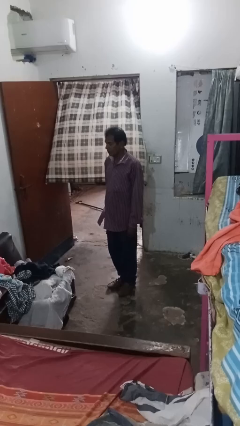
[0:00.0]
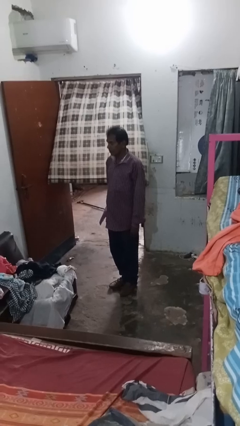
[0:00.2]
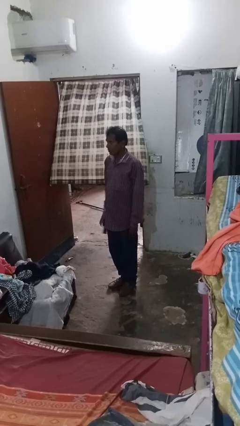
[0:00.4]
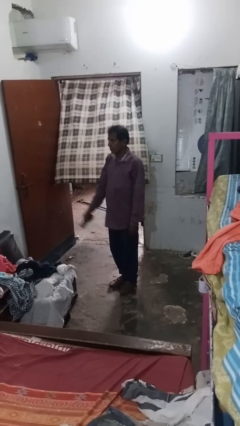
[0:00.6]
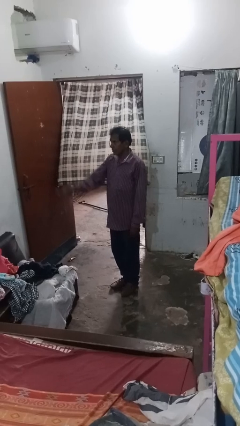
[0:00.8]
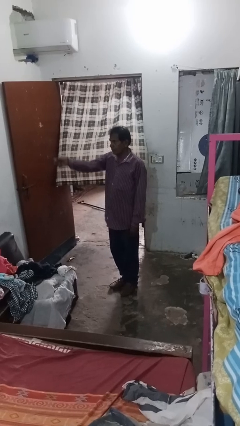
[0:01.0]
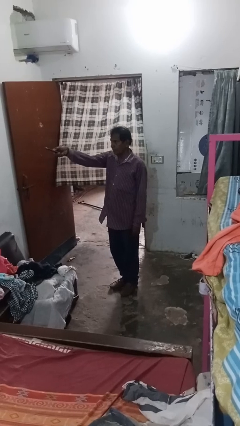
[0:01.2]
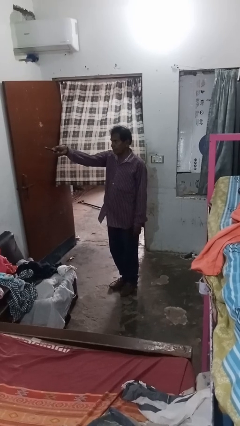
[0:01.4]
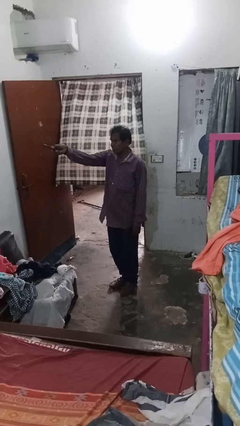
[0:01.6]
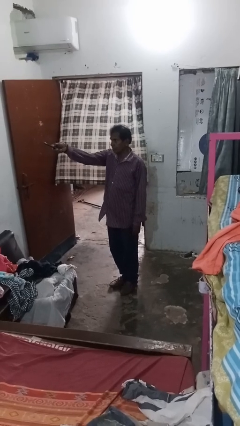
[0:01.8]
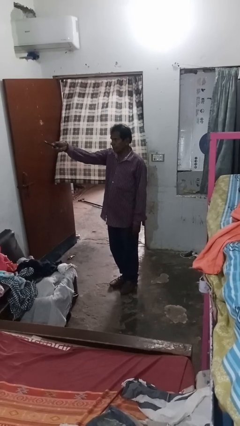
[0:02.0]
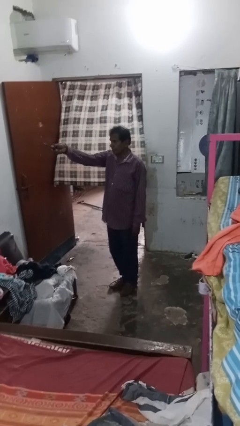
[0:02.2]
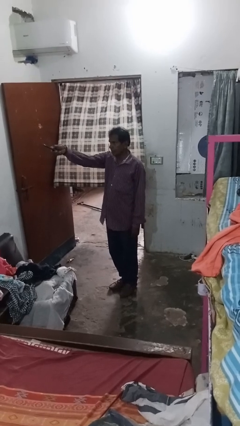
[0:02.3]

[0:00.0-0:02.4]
person uses television remote

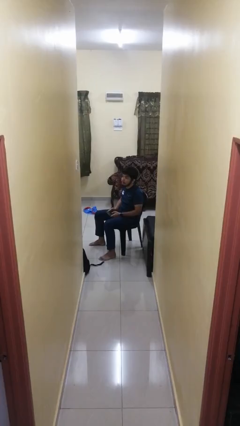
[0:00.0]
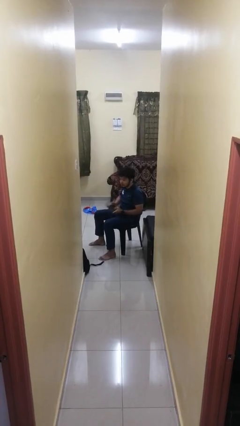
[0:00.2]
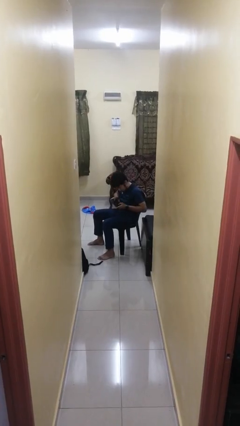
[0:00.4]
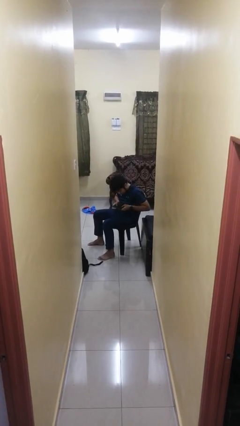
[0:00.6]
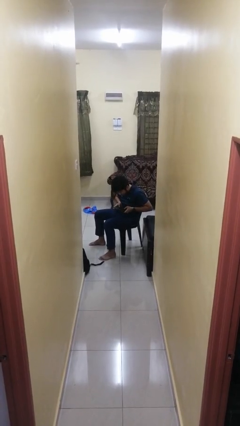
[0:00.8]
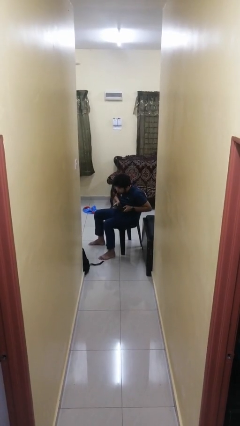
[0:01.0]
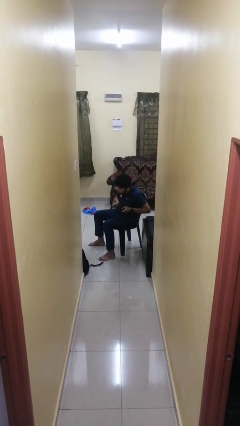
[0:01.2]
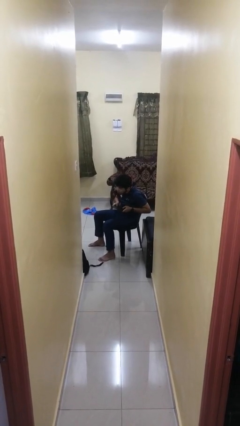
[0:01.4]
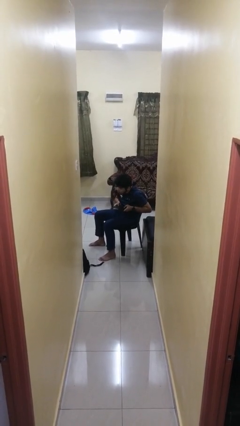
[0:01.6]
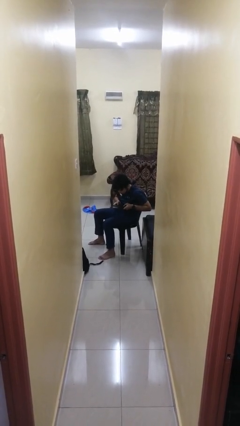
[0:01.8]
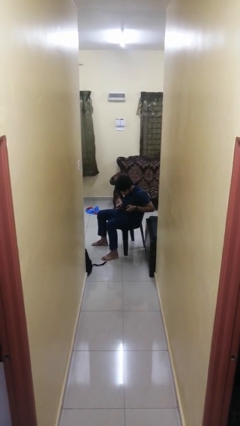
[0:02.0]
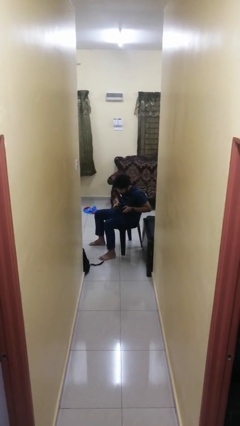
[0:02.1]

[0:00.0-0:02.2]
person interacts with handheld game

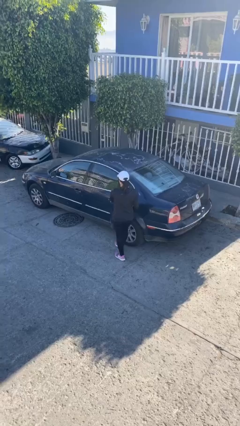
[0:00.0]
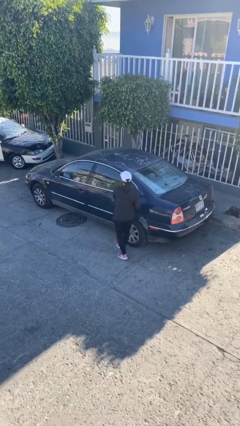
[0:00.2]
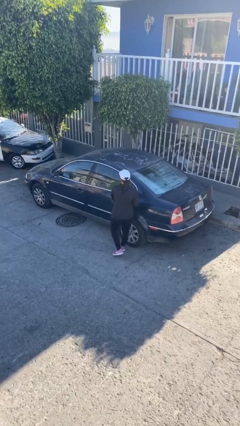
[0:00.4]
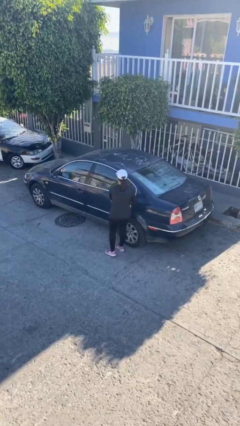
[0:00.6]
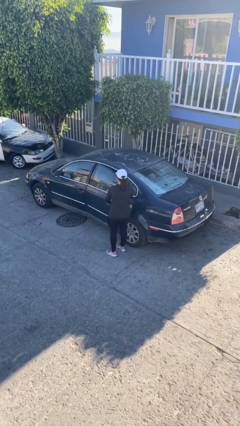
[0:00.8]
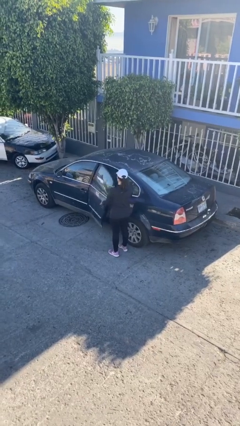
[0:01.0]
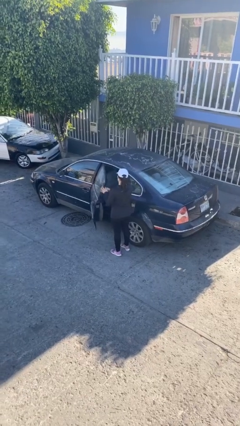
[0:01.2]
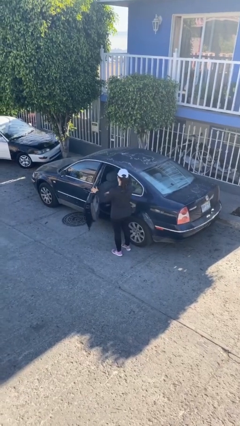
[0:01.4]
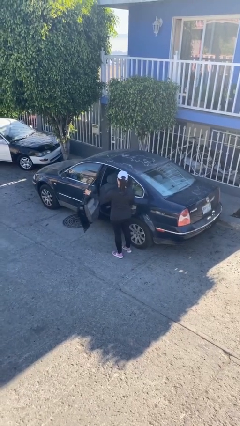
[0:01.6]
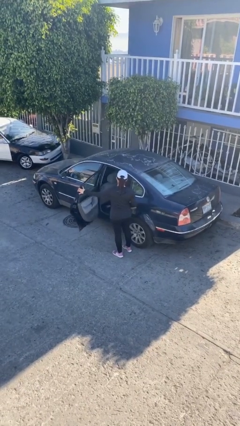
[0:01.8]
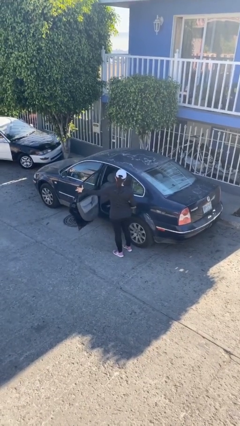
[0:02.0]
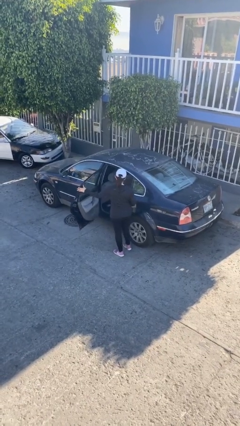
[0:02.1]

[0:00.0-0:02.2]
person opens car door

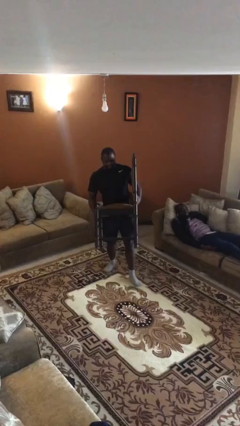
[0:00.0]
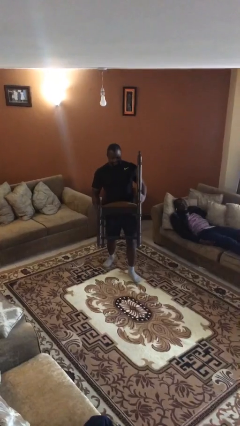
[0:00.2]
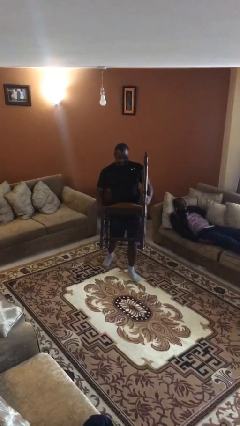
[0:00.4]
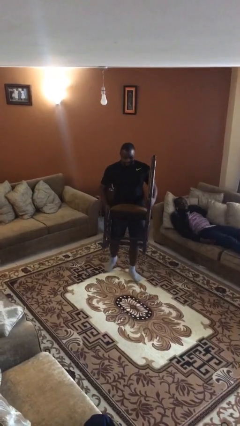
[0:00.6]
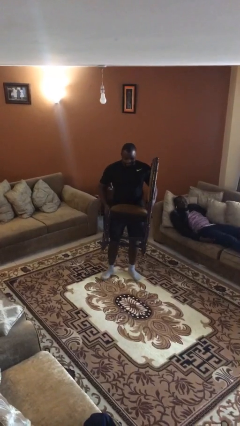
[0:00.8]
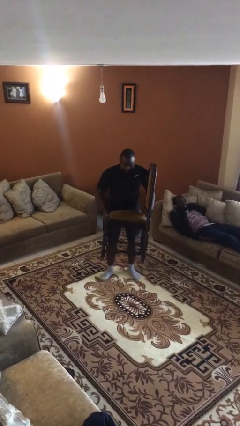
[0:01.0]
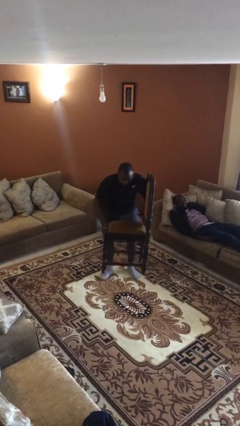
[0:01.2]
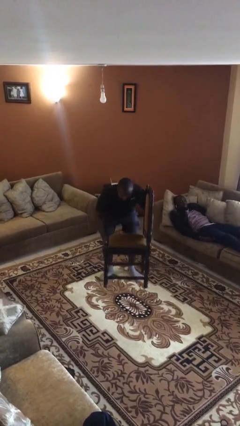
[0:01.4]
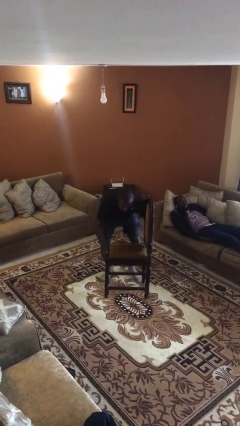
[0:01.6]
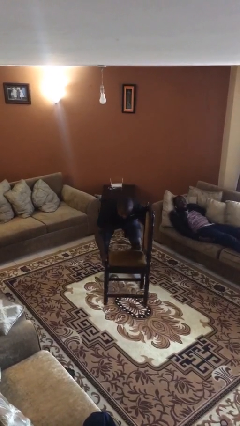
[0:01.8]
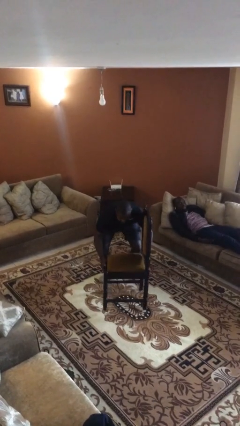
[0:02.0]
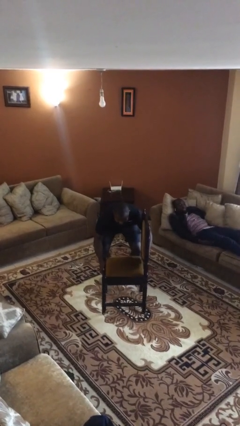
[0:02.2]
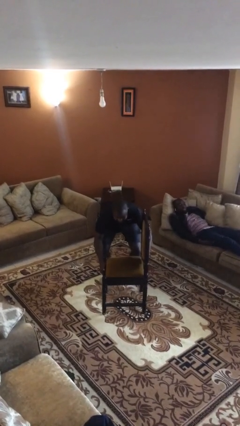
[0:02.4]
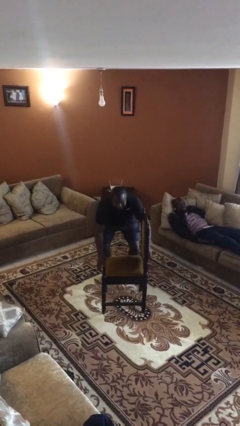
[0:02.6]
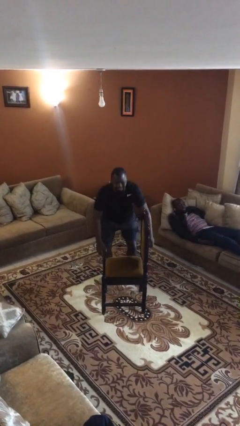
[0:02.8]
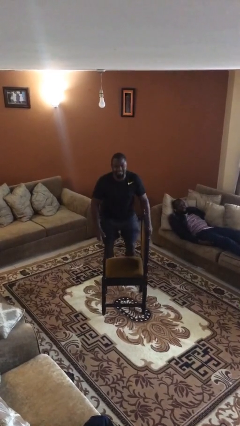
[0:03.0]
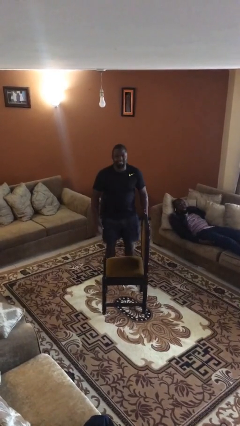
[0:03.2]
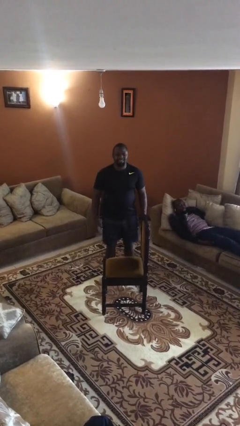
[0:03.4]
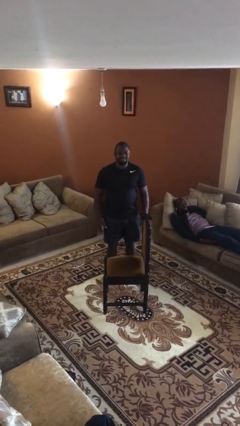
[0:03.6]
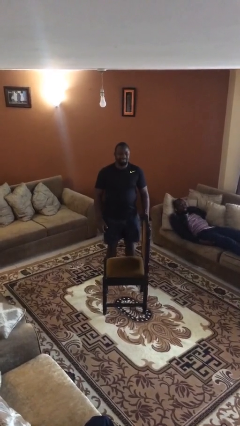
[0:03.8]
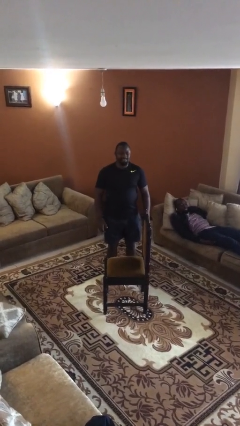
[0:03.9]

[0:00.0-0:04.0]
person puts down object on floor

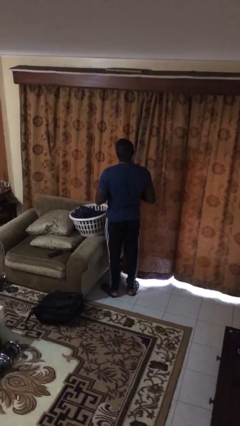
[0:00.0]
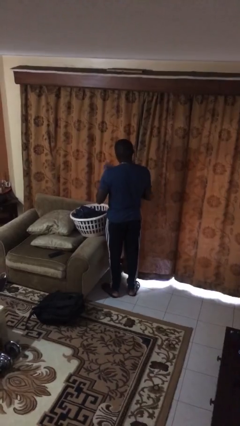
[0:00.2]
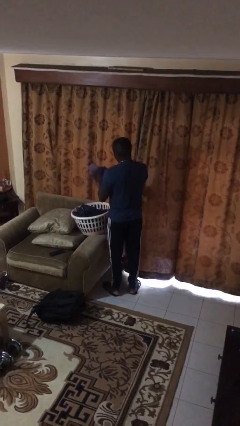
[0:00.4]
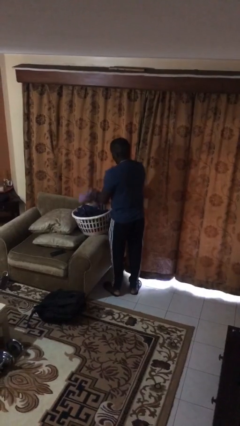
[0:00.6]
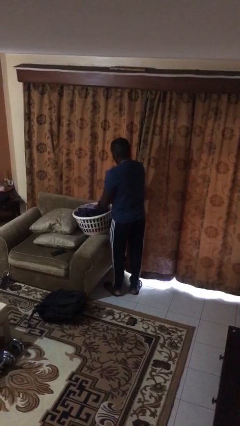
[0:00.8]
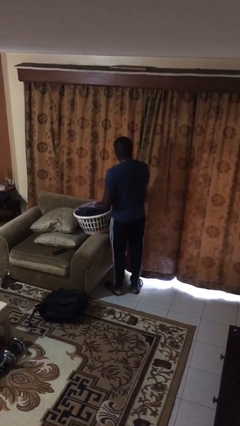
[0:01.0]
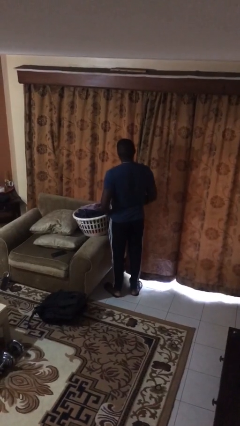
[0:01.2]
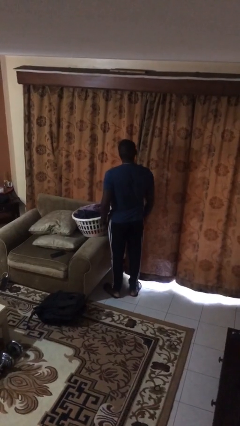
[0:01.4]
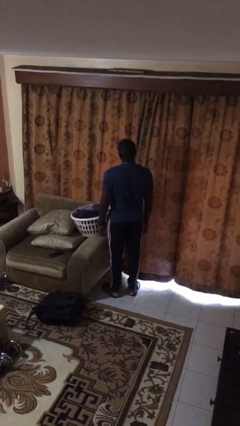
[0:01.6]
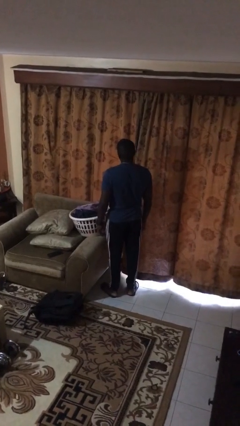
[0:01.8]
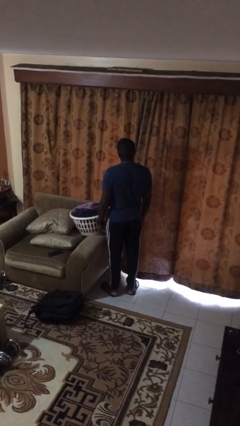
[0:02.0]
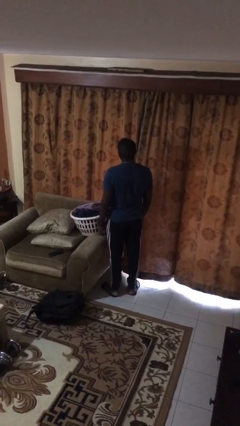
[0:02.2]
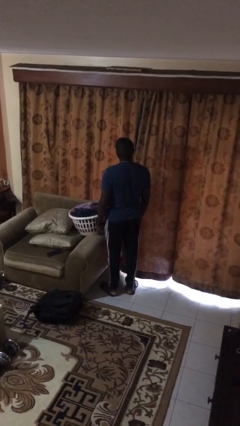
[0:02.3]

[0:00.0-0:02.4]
person puts object into basket

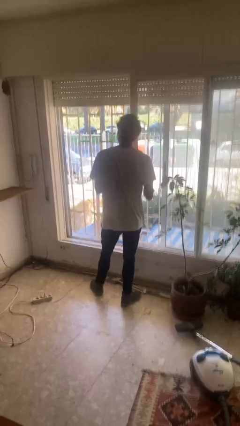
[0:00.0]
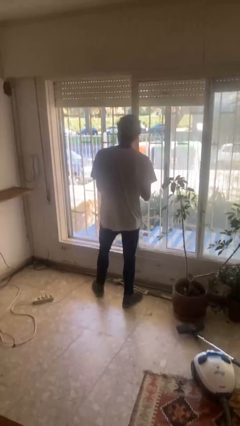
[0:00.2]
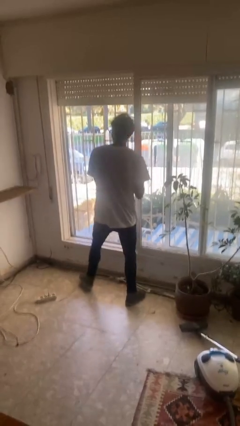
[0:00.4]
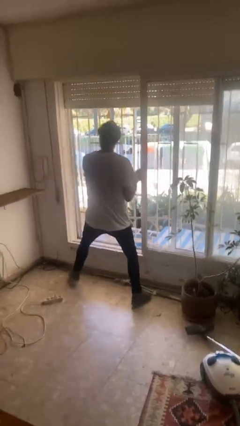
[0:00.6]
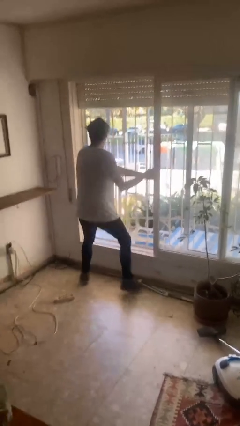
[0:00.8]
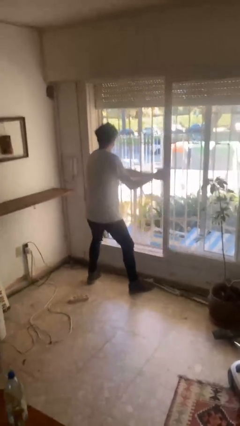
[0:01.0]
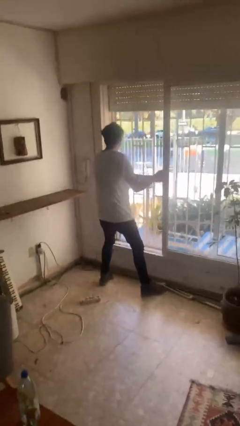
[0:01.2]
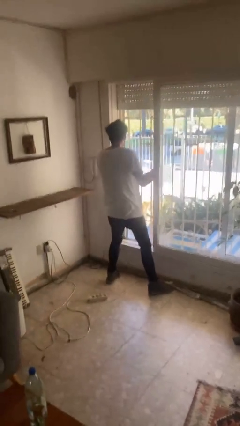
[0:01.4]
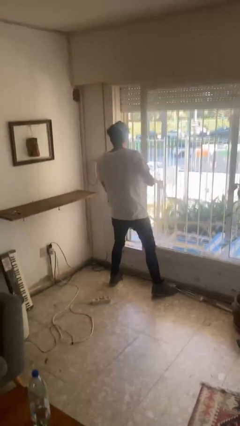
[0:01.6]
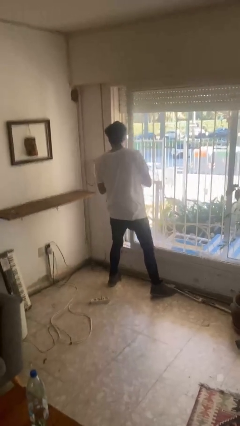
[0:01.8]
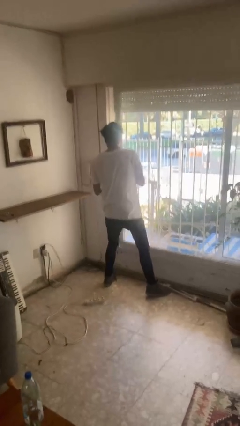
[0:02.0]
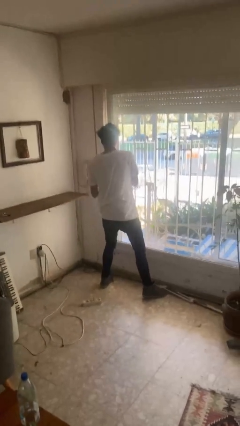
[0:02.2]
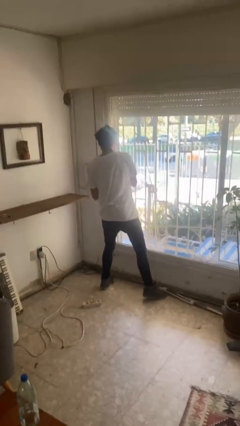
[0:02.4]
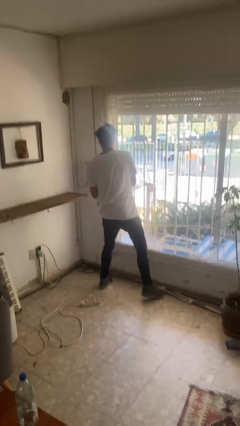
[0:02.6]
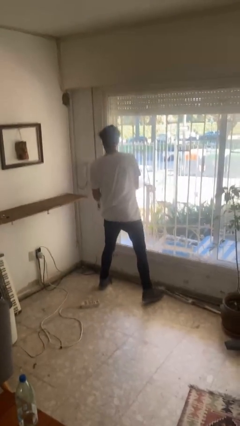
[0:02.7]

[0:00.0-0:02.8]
person closes sliding door

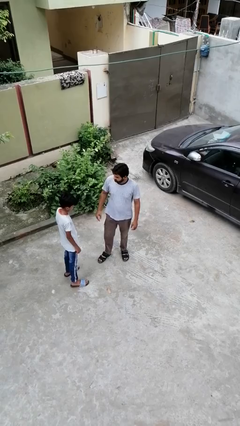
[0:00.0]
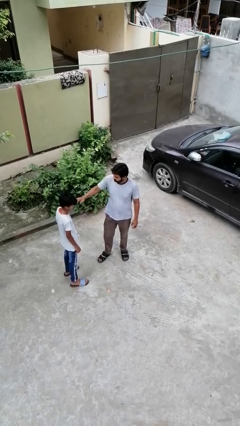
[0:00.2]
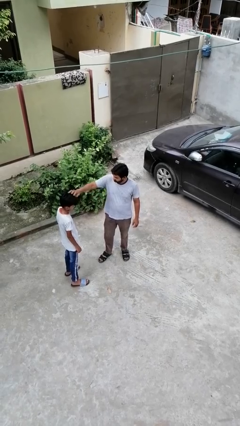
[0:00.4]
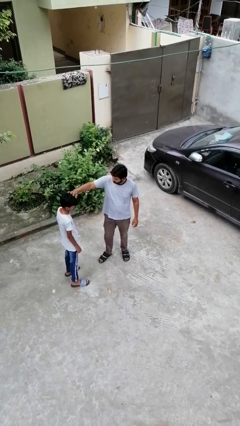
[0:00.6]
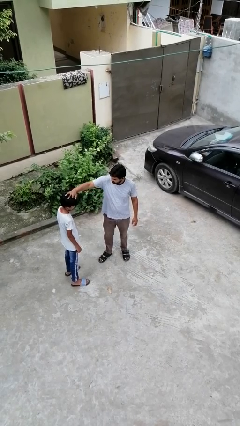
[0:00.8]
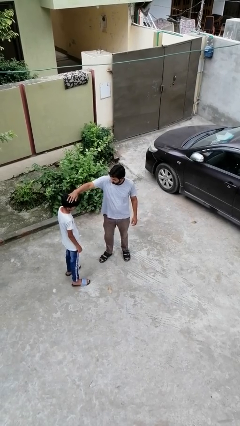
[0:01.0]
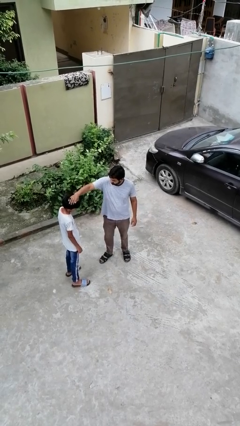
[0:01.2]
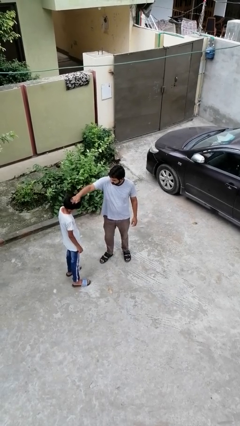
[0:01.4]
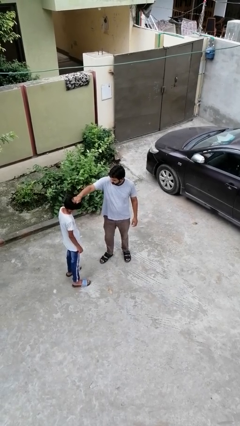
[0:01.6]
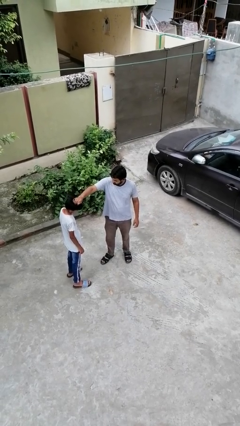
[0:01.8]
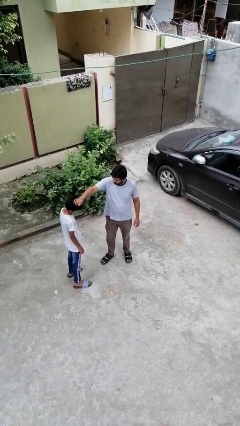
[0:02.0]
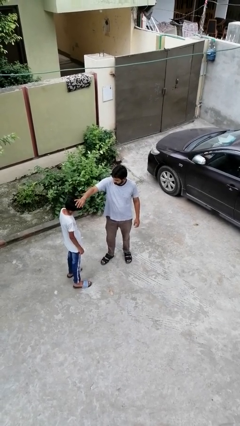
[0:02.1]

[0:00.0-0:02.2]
person grabs person by hair
